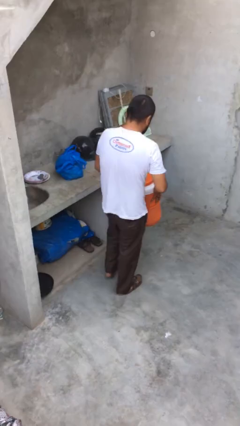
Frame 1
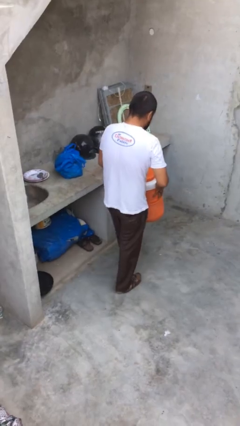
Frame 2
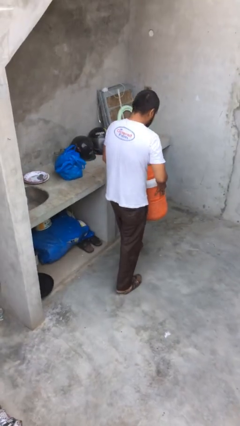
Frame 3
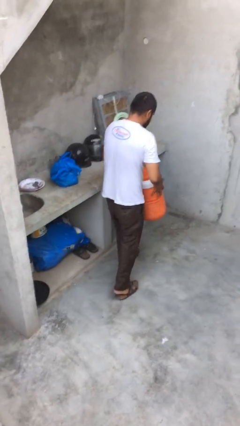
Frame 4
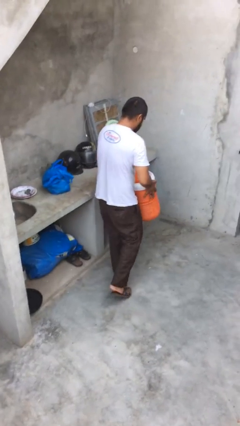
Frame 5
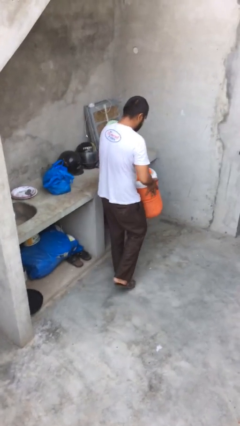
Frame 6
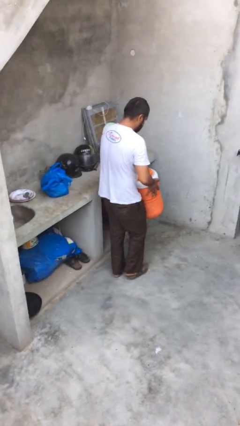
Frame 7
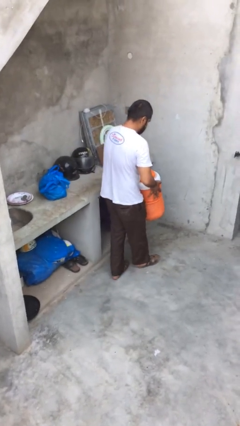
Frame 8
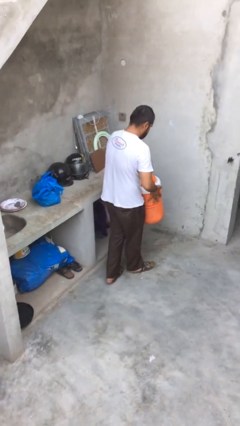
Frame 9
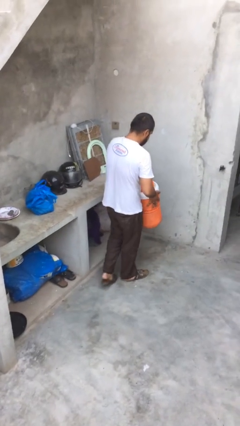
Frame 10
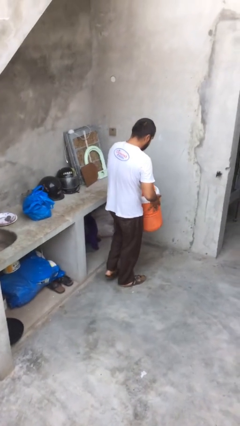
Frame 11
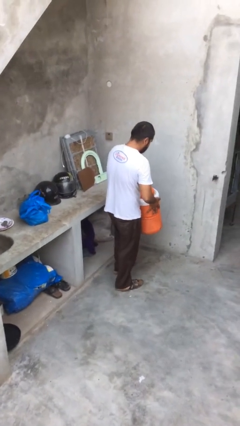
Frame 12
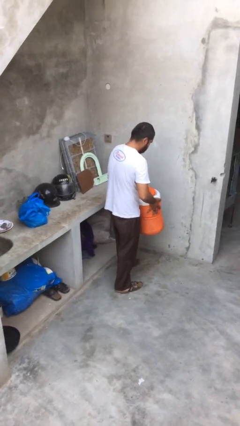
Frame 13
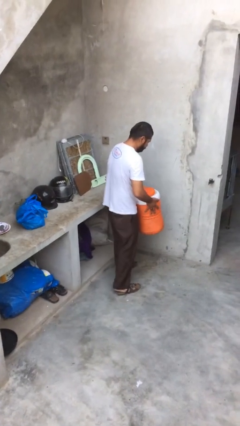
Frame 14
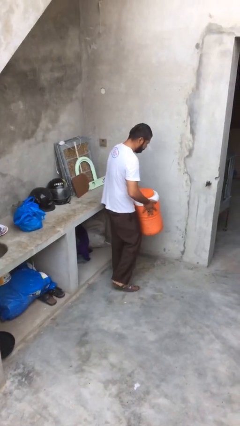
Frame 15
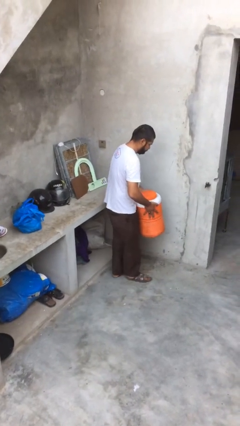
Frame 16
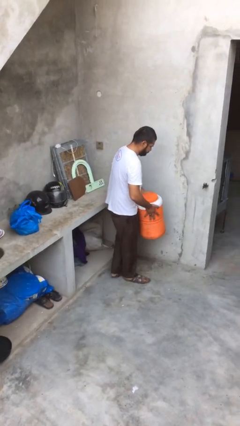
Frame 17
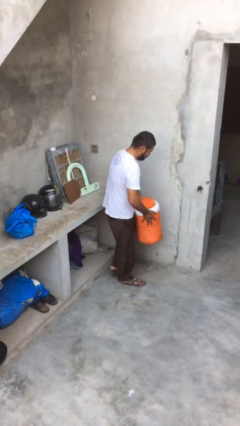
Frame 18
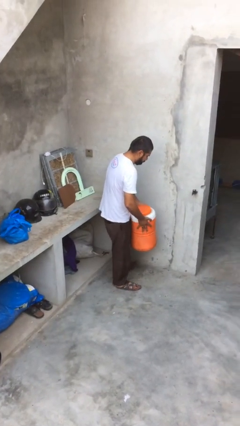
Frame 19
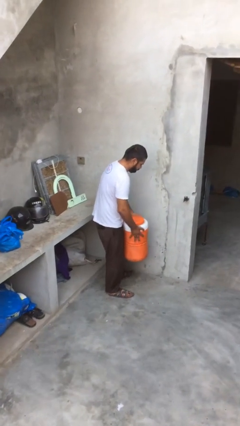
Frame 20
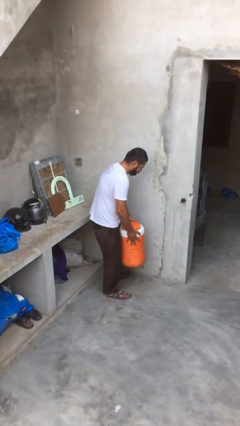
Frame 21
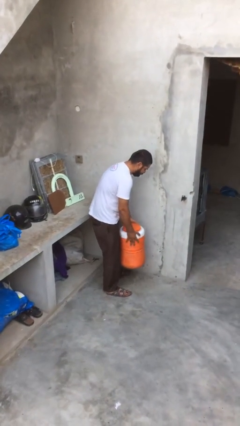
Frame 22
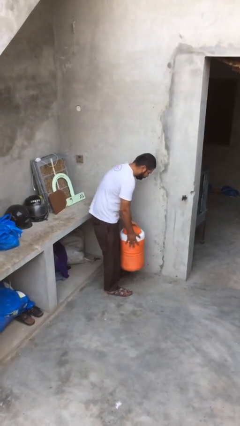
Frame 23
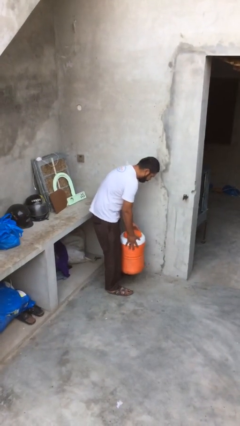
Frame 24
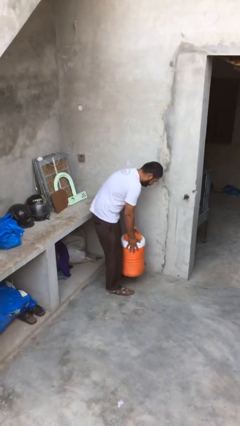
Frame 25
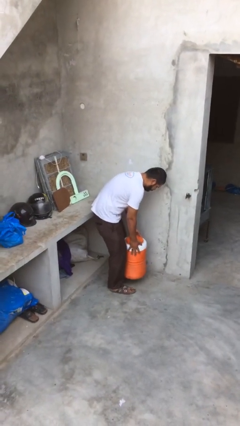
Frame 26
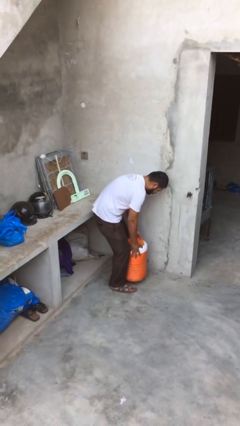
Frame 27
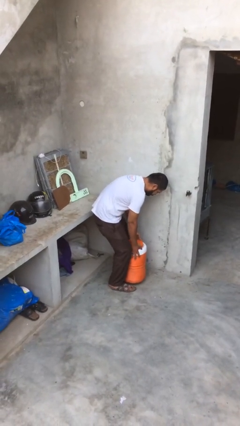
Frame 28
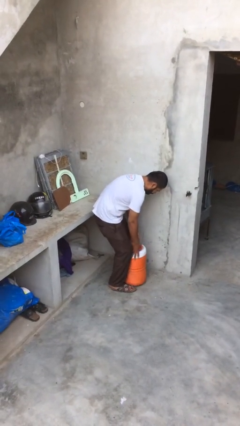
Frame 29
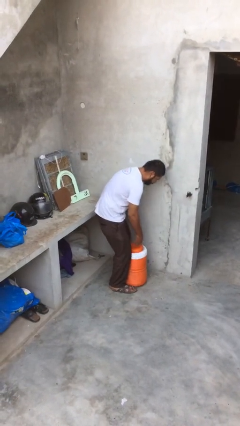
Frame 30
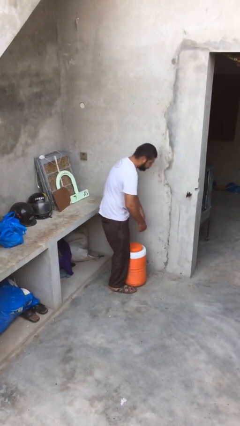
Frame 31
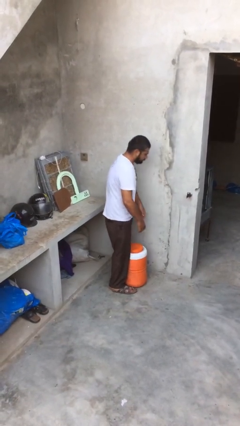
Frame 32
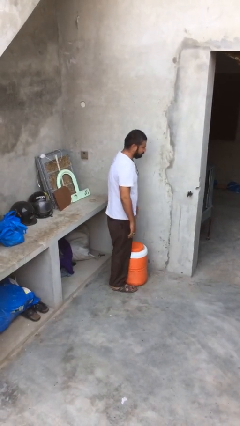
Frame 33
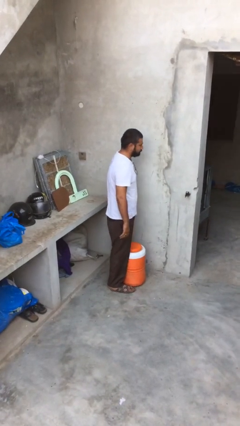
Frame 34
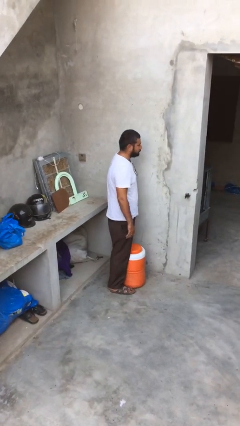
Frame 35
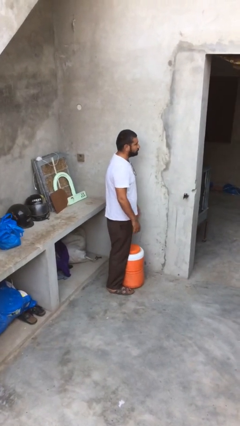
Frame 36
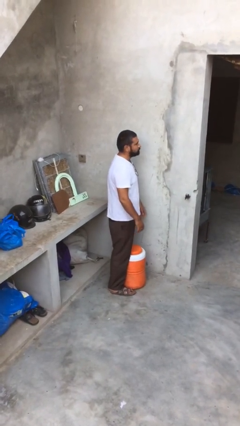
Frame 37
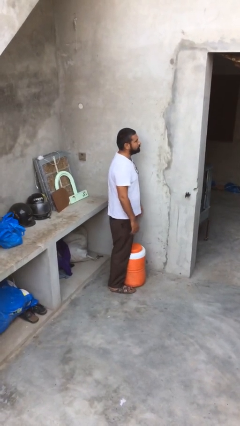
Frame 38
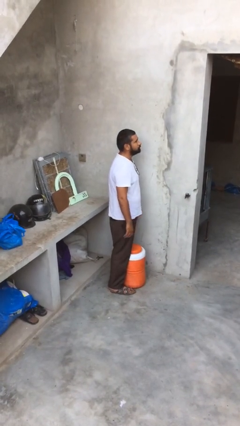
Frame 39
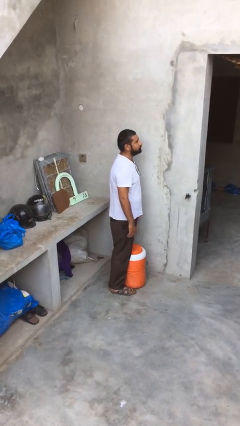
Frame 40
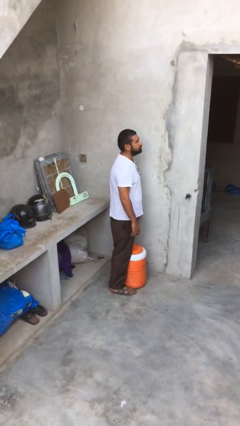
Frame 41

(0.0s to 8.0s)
person puts down object on floor

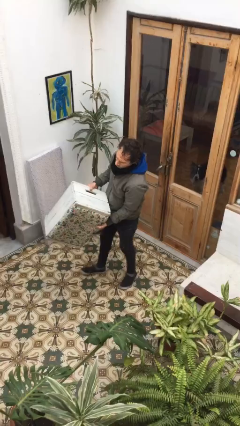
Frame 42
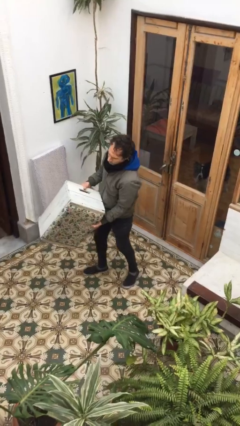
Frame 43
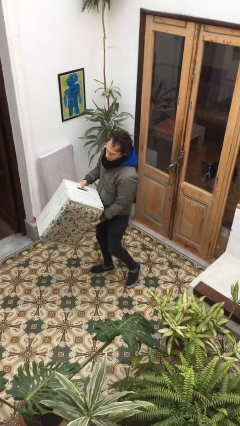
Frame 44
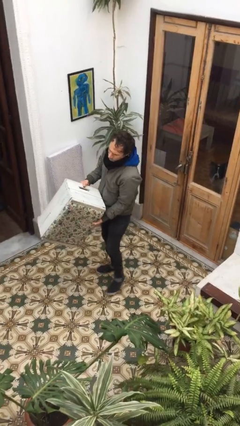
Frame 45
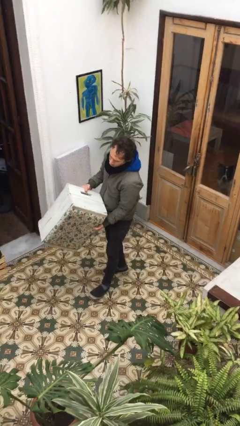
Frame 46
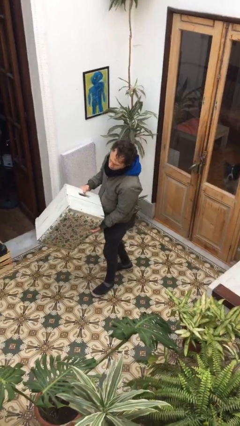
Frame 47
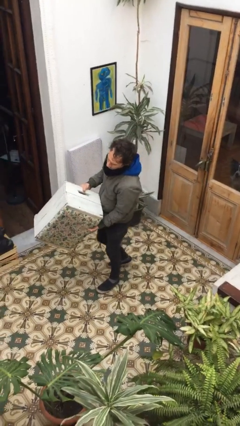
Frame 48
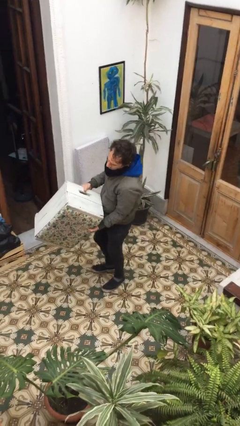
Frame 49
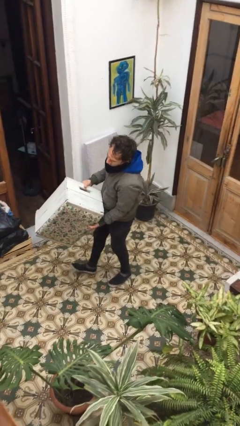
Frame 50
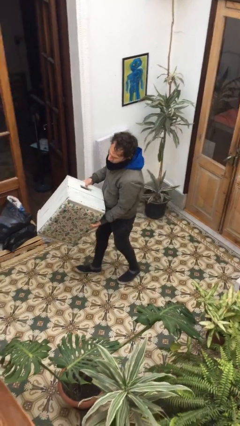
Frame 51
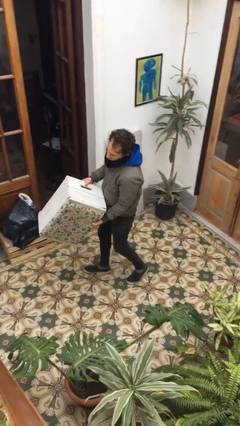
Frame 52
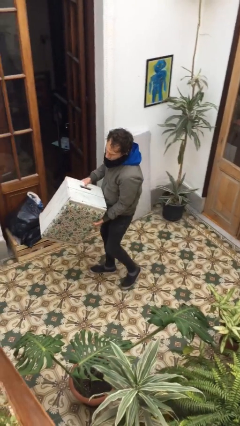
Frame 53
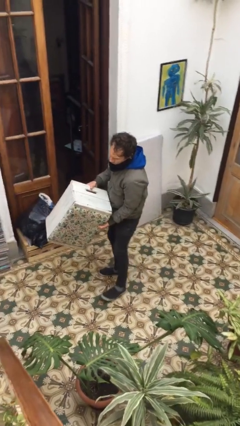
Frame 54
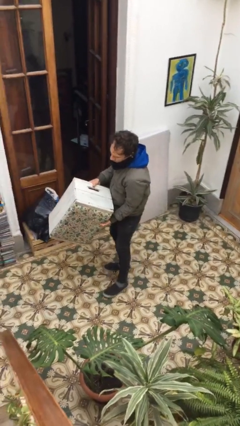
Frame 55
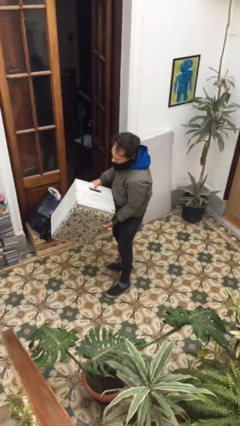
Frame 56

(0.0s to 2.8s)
person carries heavy object

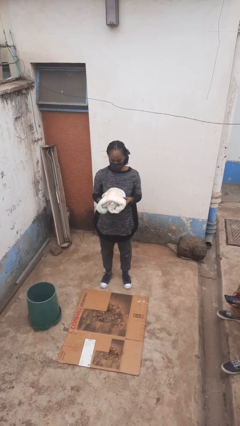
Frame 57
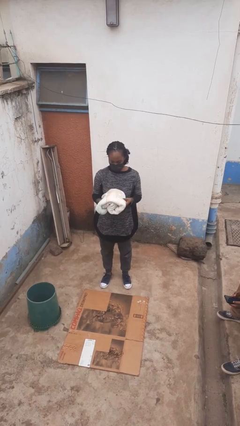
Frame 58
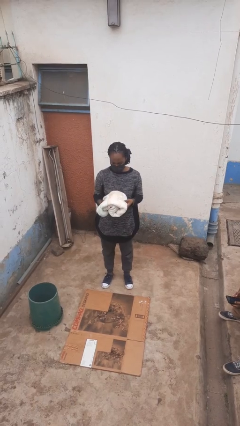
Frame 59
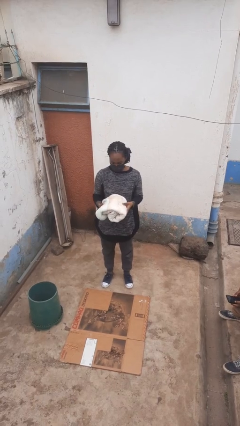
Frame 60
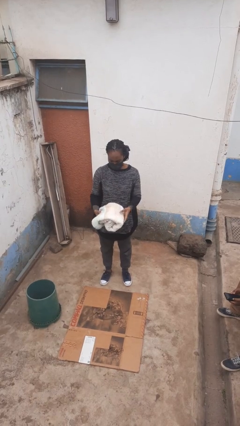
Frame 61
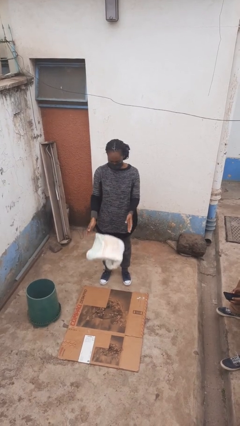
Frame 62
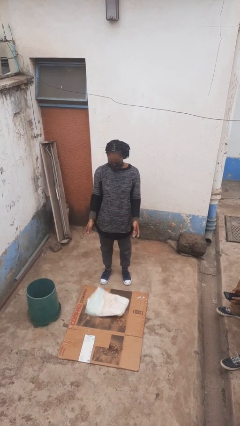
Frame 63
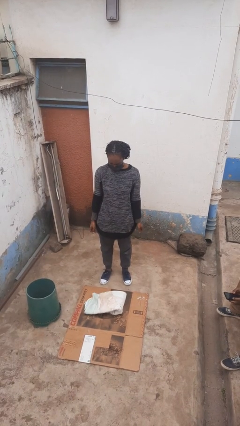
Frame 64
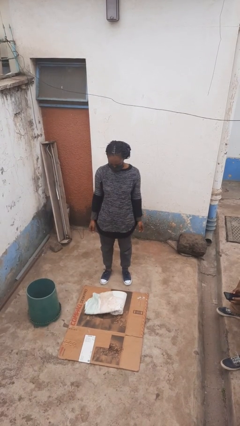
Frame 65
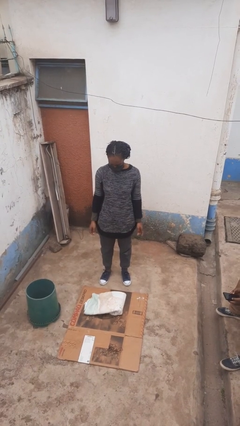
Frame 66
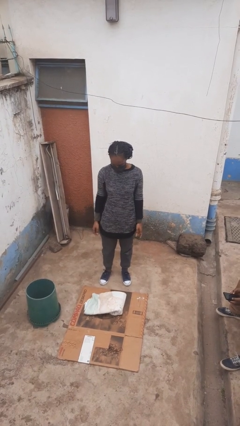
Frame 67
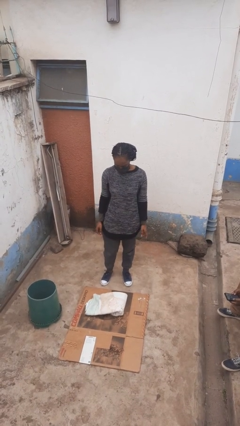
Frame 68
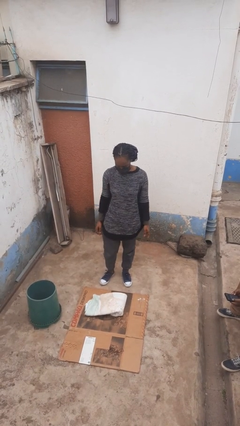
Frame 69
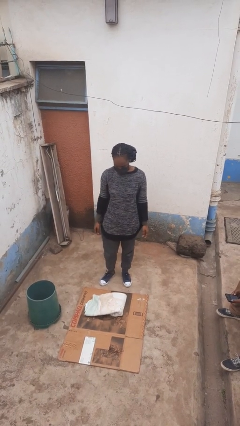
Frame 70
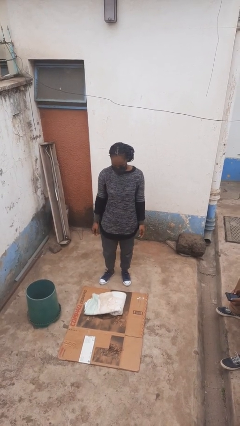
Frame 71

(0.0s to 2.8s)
person drops object

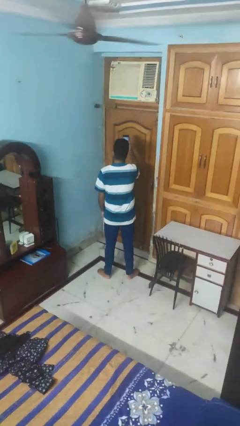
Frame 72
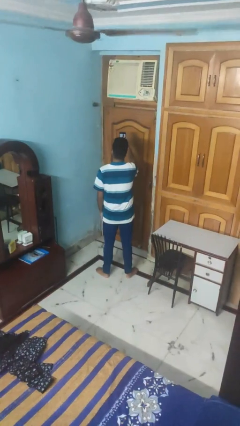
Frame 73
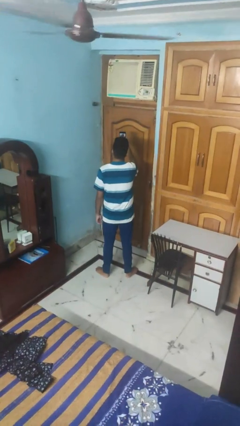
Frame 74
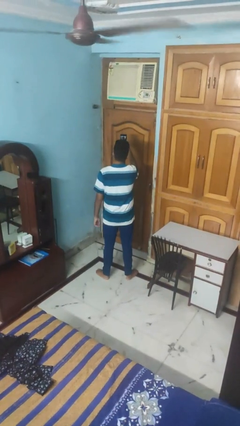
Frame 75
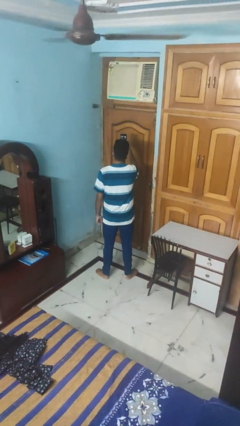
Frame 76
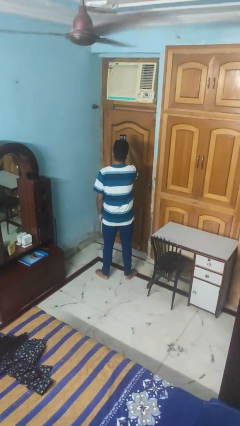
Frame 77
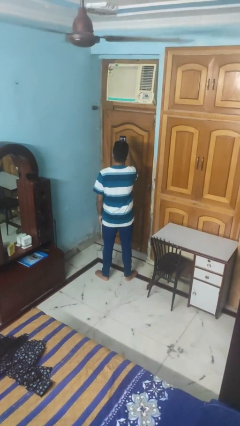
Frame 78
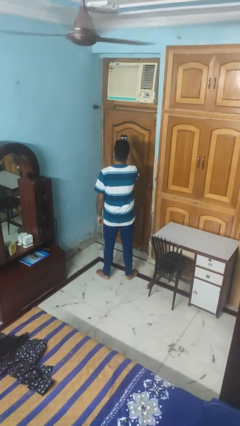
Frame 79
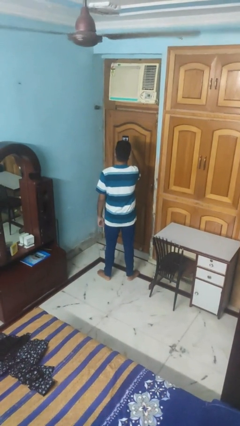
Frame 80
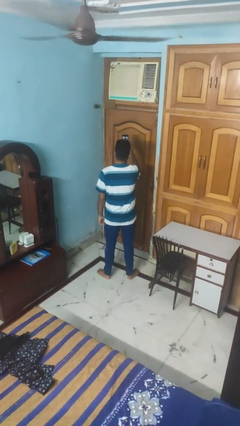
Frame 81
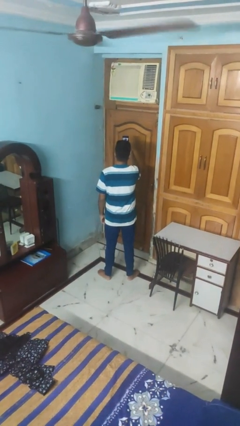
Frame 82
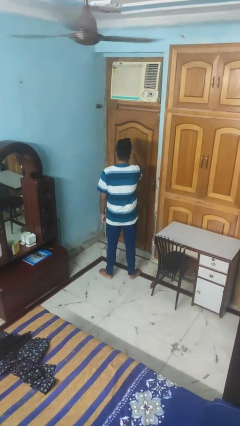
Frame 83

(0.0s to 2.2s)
person takes selfie

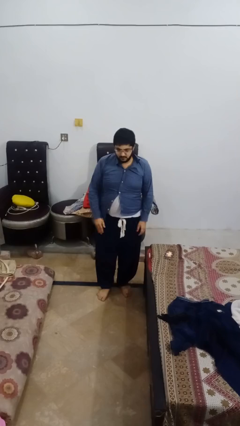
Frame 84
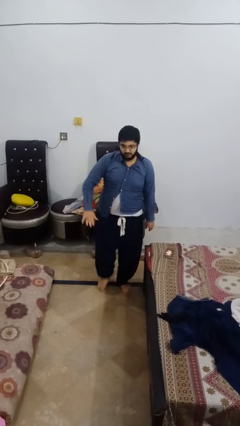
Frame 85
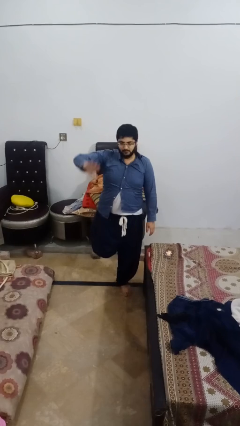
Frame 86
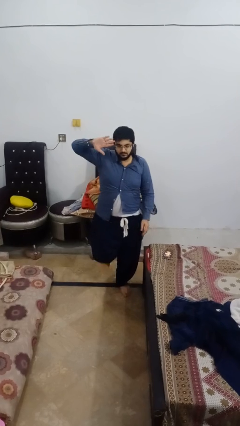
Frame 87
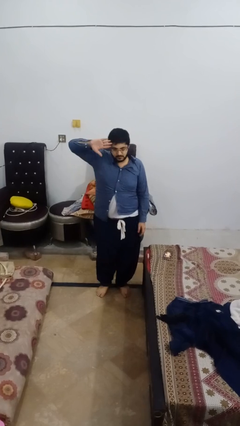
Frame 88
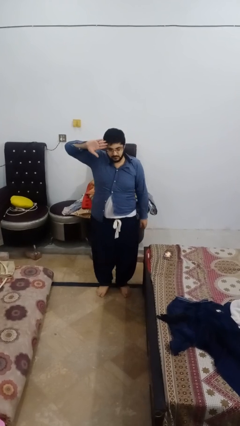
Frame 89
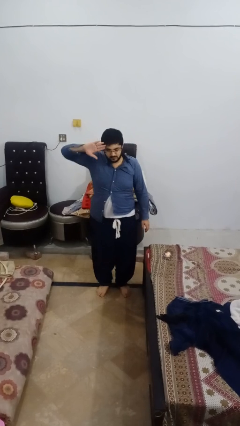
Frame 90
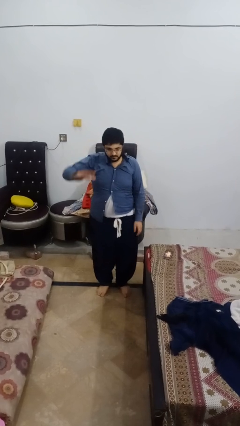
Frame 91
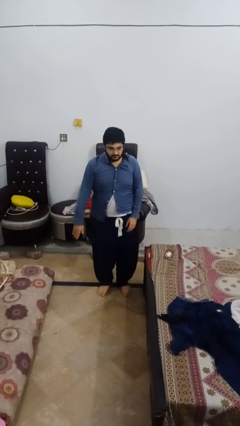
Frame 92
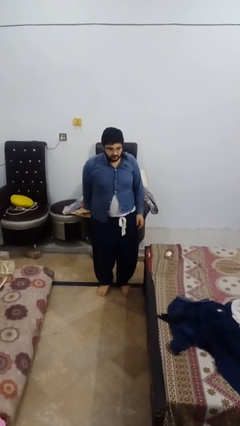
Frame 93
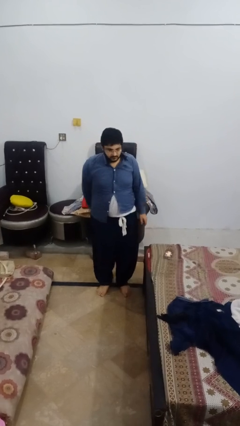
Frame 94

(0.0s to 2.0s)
person salutes
